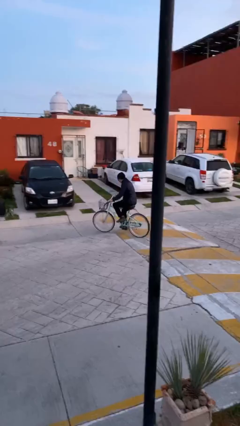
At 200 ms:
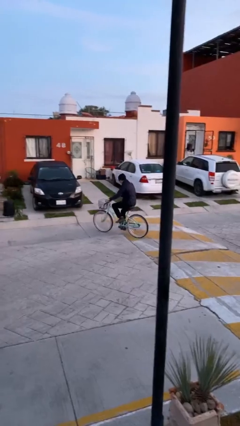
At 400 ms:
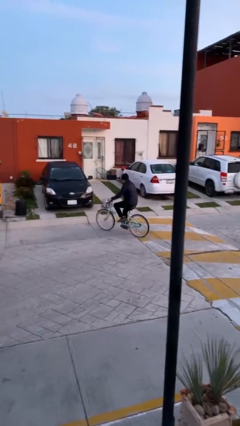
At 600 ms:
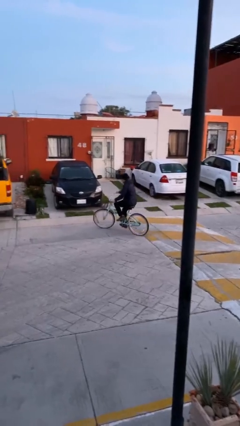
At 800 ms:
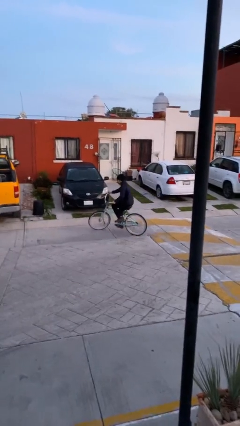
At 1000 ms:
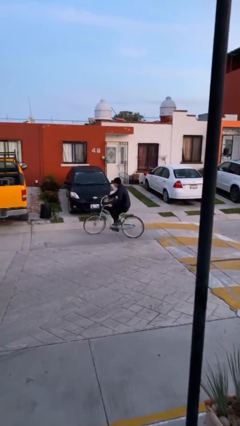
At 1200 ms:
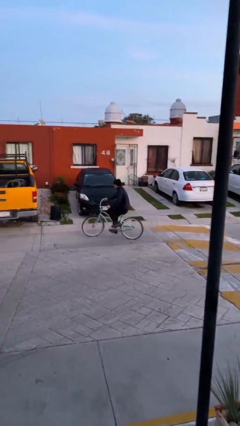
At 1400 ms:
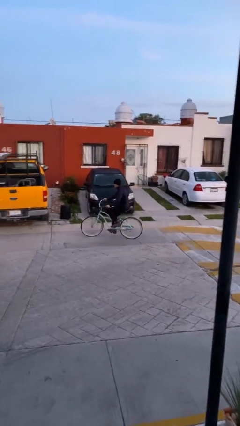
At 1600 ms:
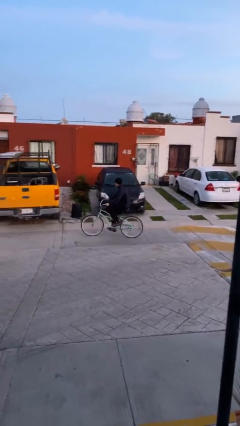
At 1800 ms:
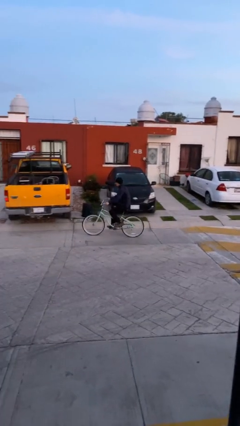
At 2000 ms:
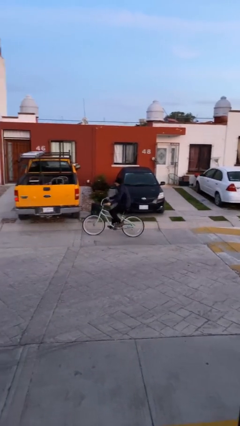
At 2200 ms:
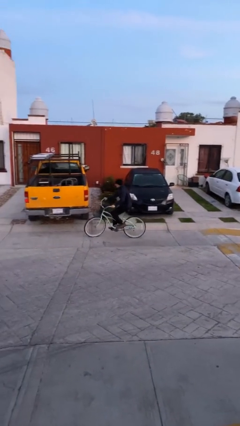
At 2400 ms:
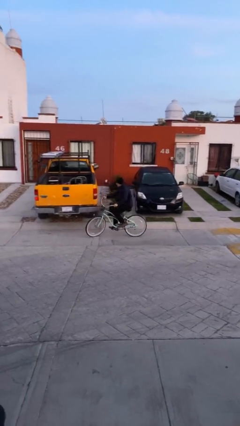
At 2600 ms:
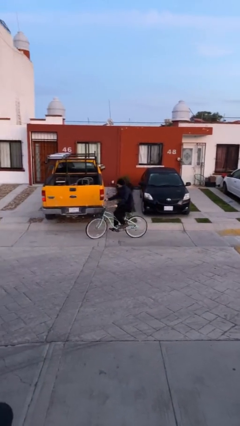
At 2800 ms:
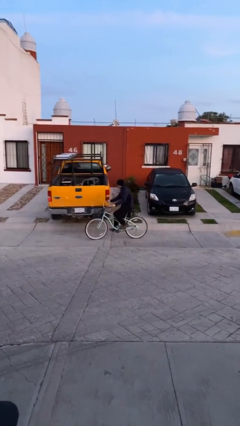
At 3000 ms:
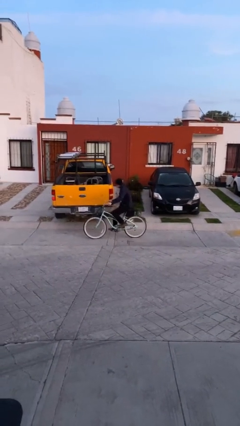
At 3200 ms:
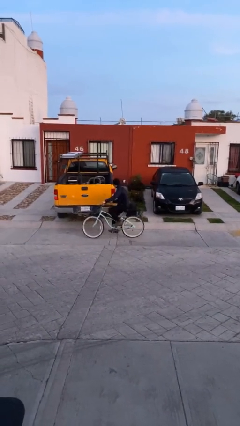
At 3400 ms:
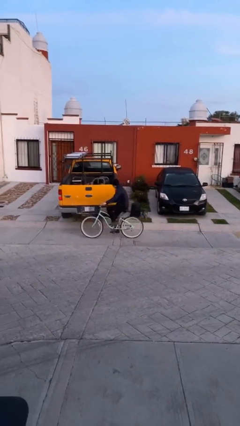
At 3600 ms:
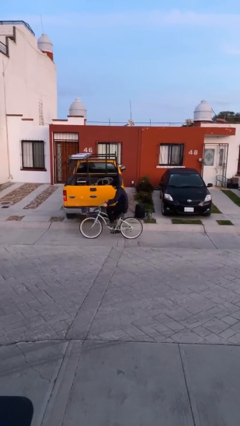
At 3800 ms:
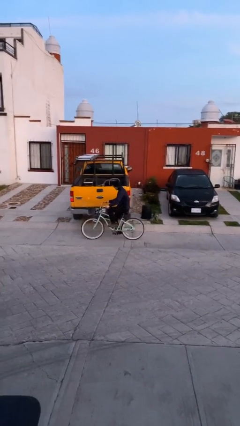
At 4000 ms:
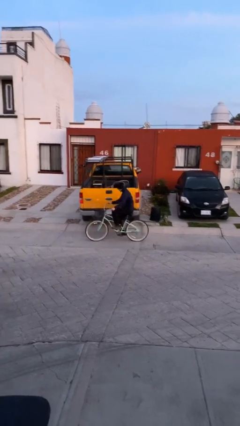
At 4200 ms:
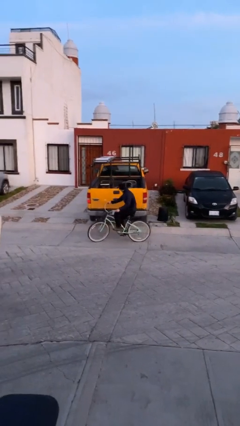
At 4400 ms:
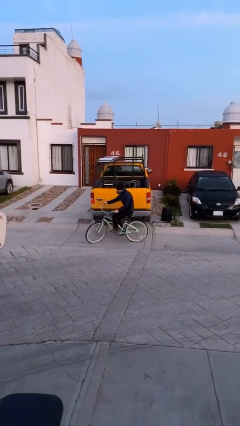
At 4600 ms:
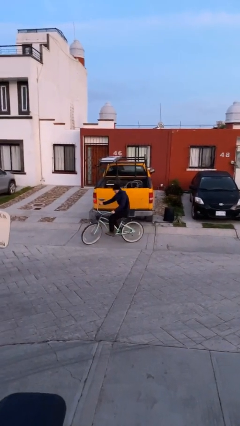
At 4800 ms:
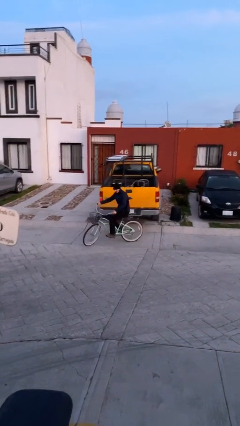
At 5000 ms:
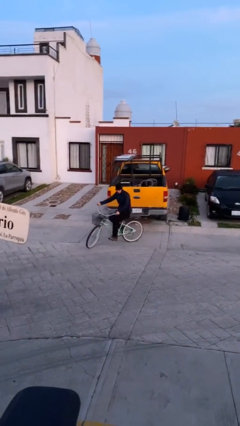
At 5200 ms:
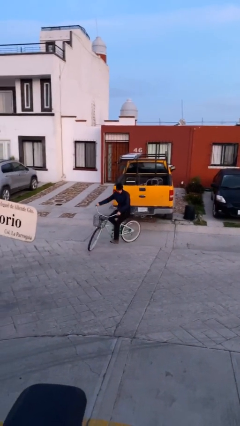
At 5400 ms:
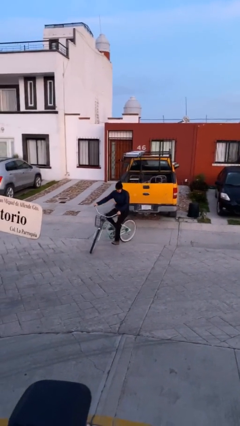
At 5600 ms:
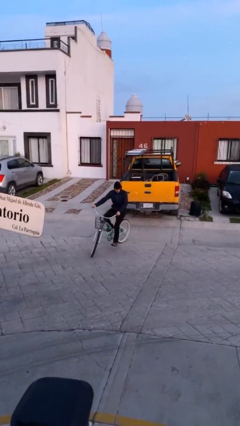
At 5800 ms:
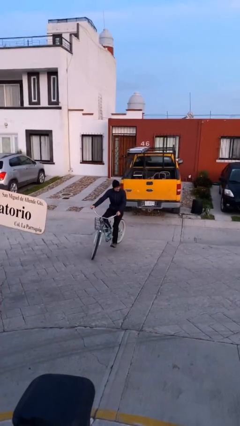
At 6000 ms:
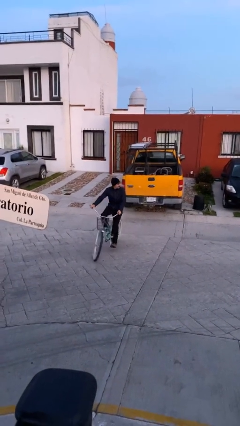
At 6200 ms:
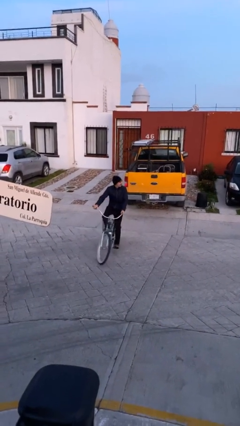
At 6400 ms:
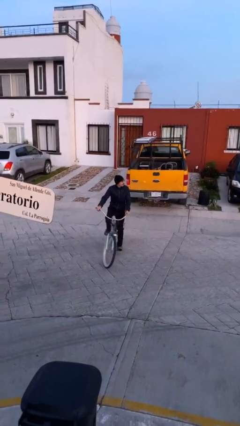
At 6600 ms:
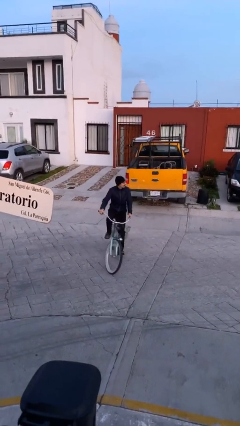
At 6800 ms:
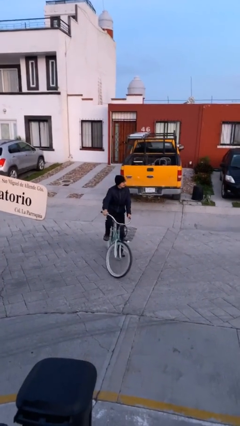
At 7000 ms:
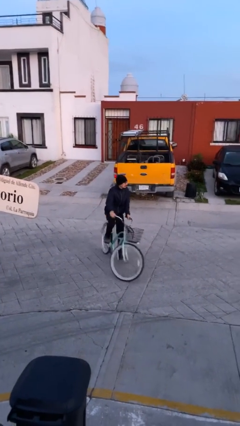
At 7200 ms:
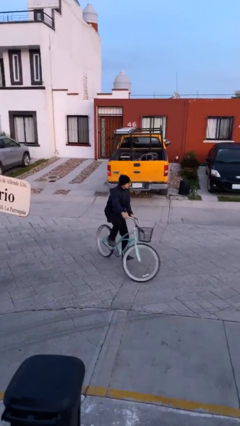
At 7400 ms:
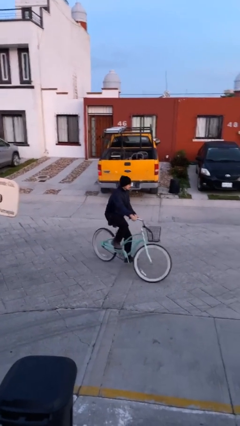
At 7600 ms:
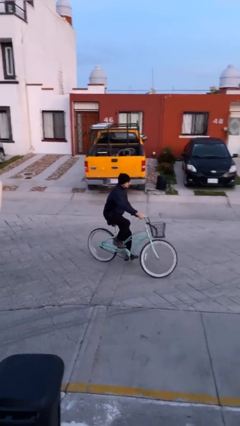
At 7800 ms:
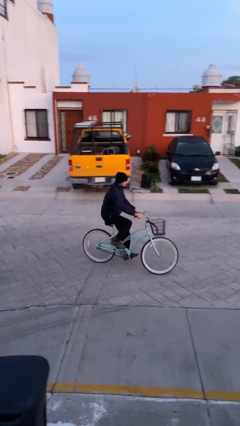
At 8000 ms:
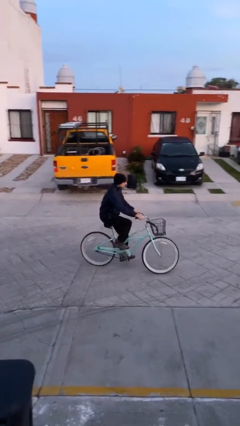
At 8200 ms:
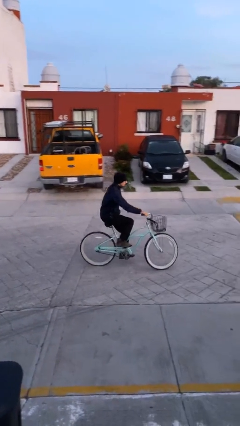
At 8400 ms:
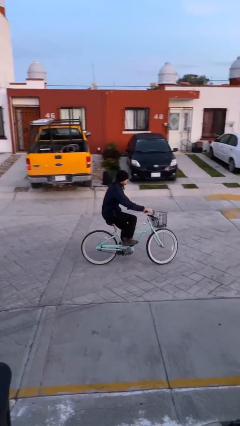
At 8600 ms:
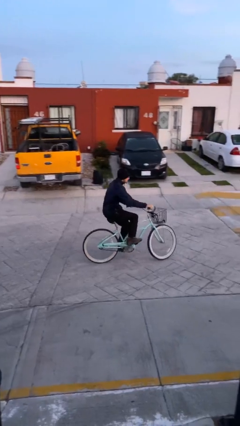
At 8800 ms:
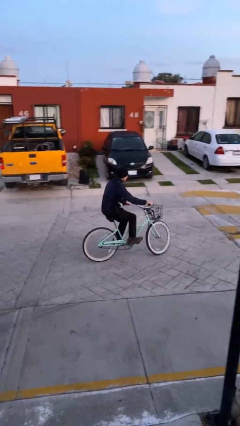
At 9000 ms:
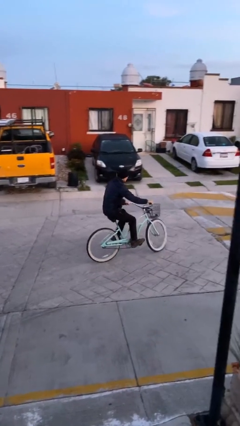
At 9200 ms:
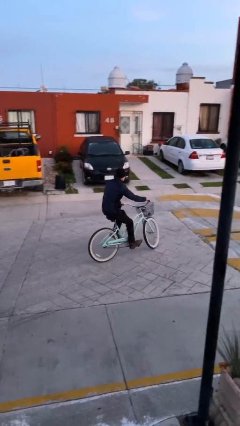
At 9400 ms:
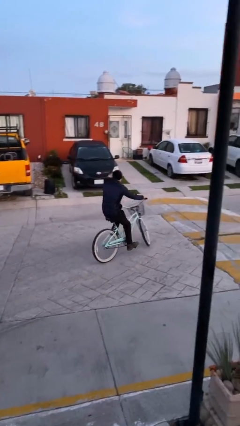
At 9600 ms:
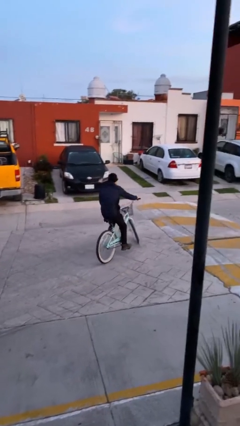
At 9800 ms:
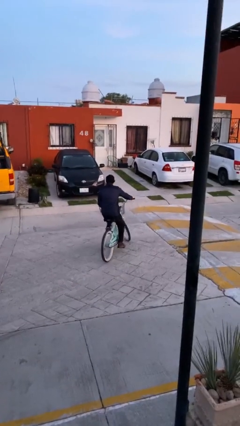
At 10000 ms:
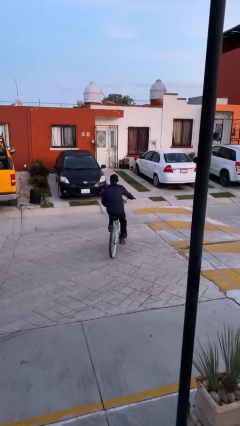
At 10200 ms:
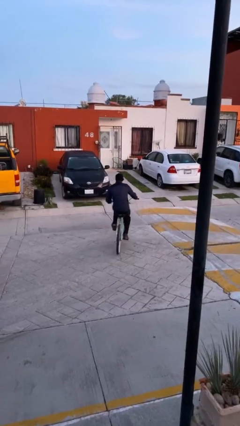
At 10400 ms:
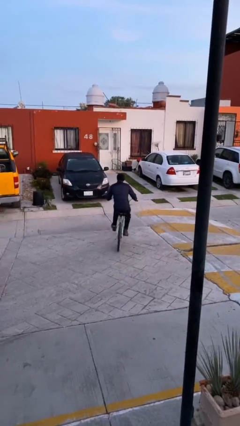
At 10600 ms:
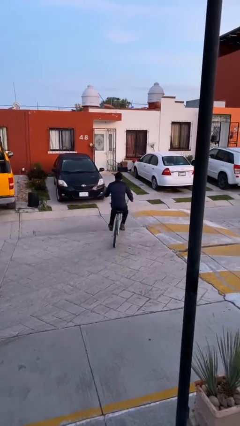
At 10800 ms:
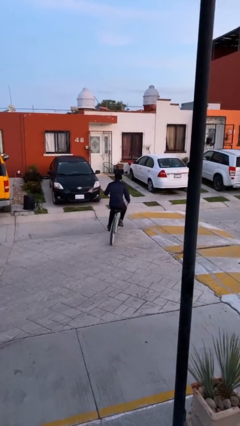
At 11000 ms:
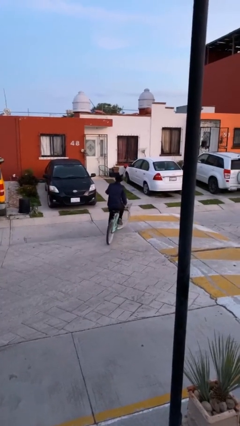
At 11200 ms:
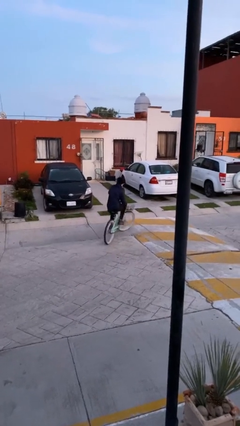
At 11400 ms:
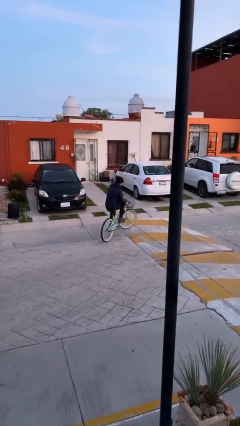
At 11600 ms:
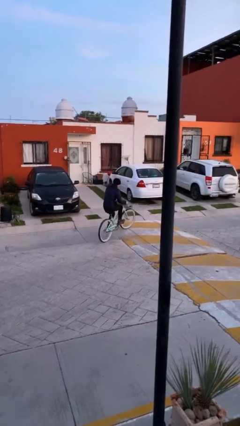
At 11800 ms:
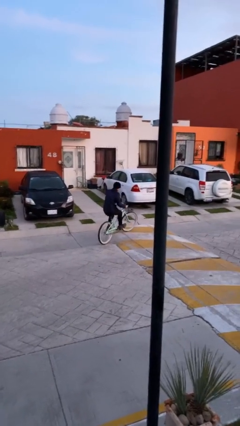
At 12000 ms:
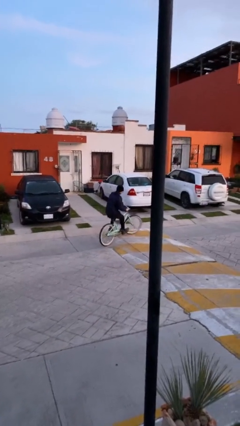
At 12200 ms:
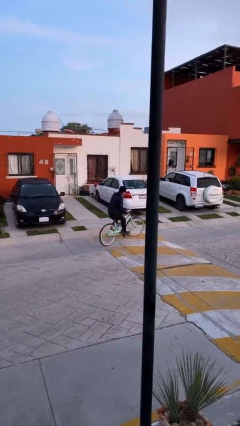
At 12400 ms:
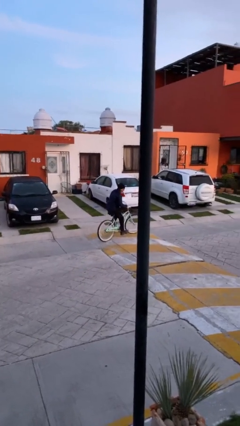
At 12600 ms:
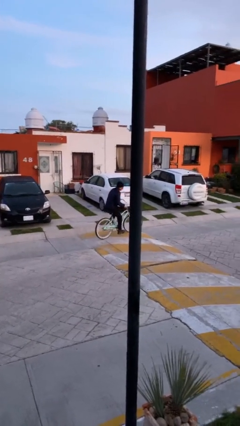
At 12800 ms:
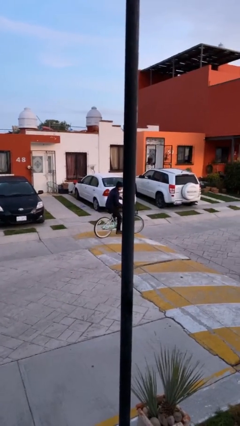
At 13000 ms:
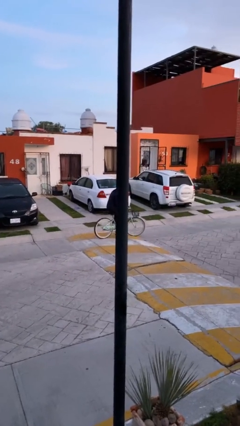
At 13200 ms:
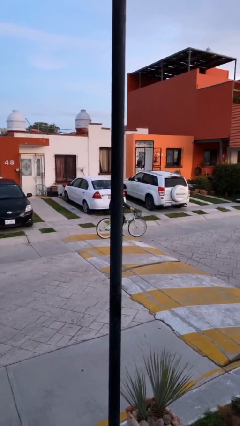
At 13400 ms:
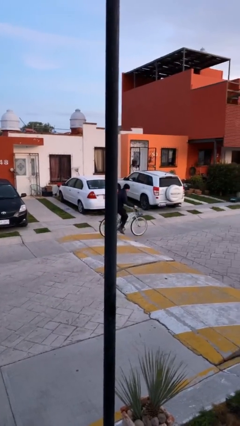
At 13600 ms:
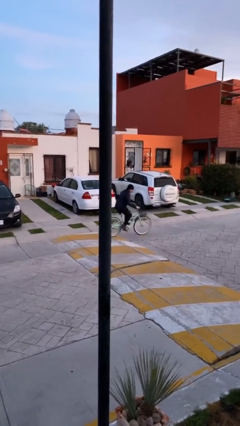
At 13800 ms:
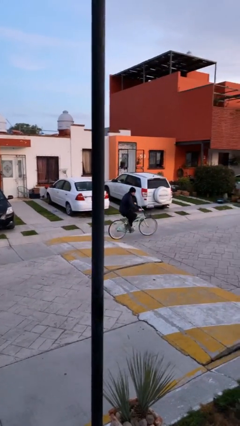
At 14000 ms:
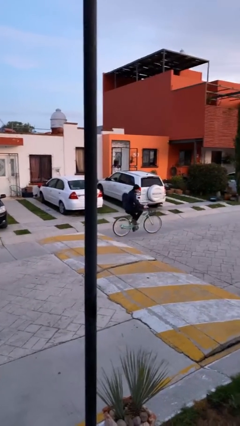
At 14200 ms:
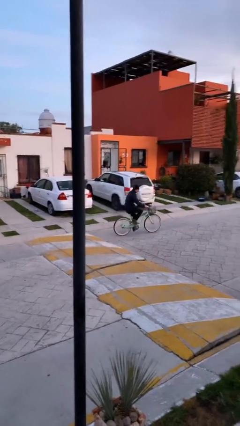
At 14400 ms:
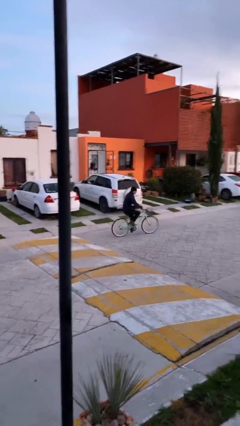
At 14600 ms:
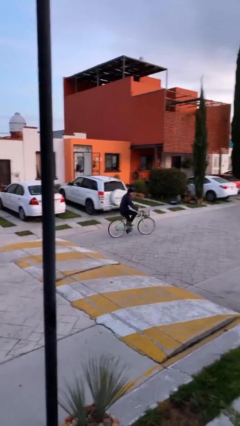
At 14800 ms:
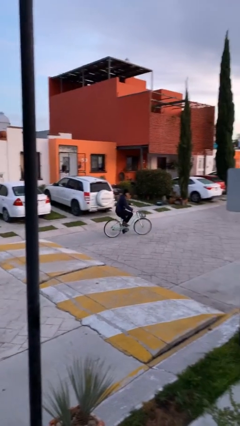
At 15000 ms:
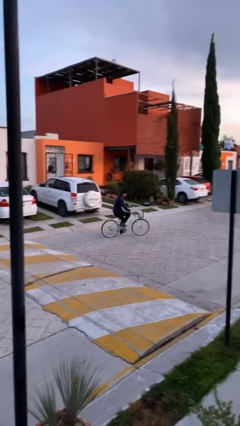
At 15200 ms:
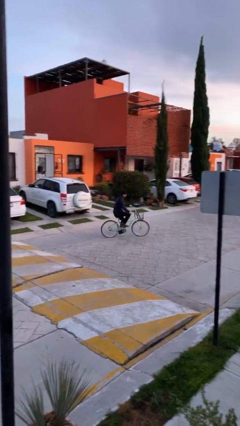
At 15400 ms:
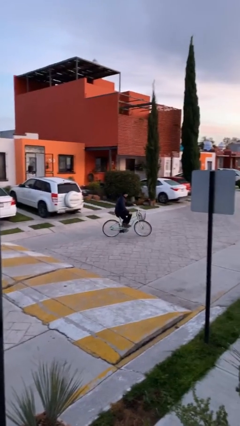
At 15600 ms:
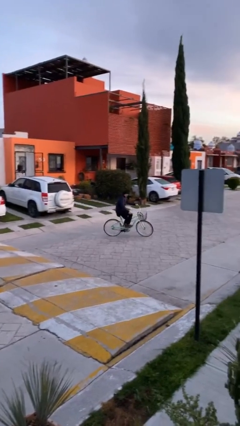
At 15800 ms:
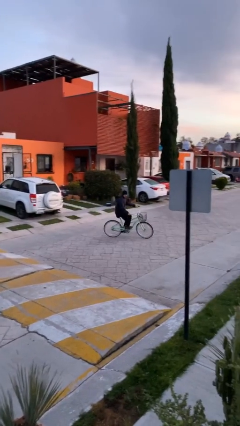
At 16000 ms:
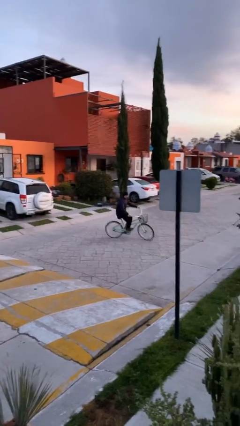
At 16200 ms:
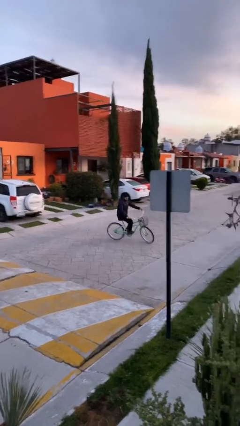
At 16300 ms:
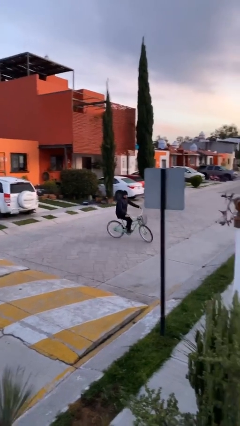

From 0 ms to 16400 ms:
person rides bicycle

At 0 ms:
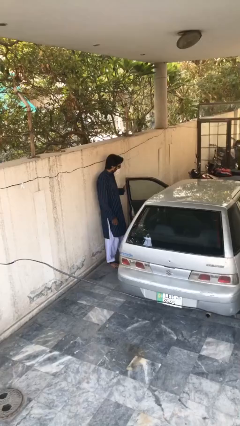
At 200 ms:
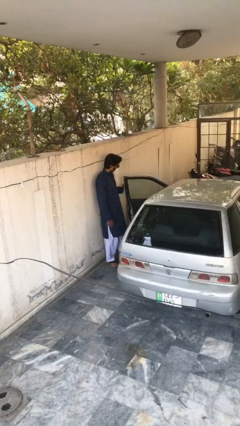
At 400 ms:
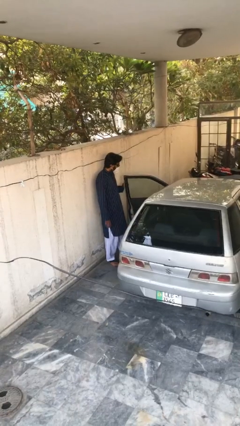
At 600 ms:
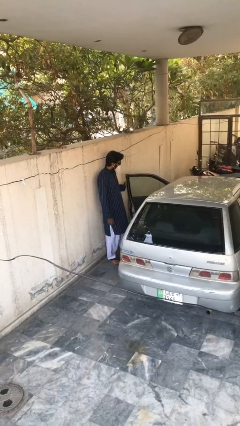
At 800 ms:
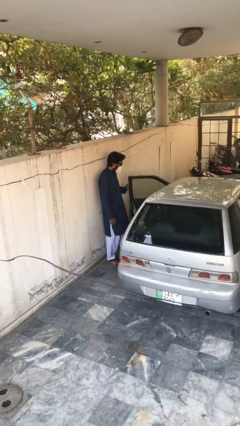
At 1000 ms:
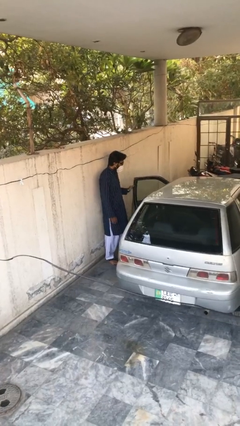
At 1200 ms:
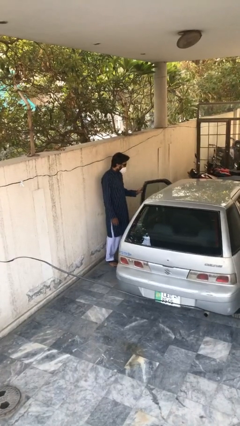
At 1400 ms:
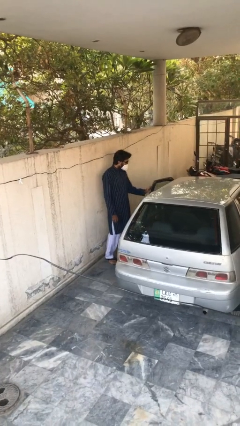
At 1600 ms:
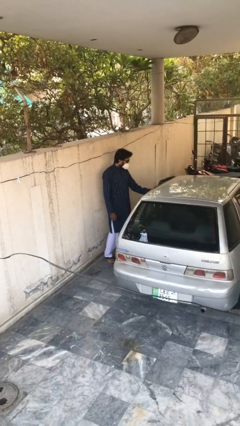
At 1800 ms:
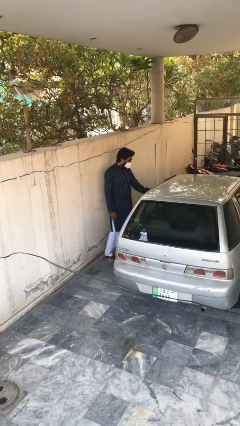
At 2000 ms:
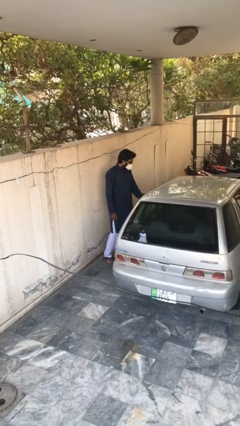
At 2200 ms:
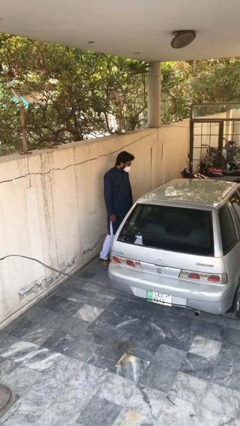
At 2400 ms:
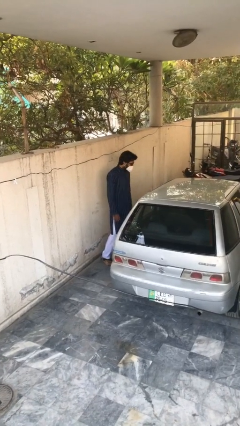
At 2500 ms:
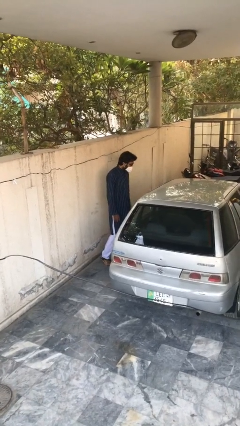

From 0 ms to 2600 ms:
person closes car door
